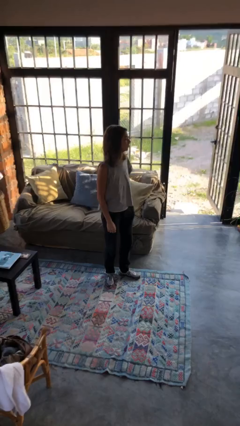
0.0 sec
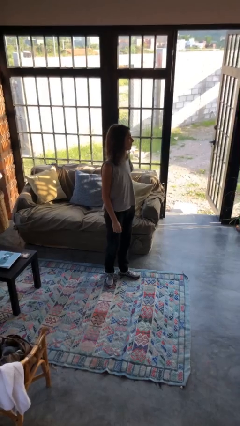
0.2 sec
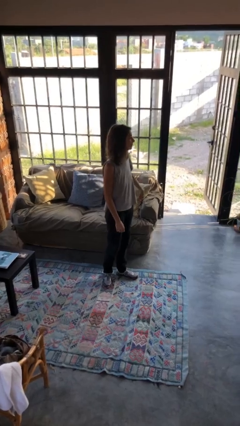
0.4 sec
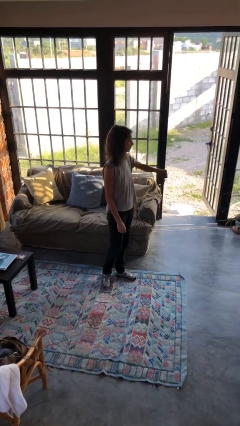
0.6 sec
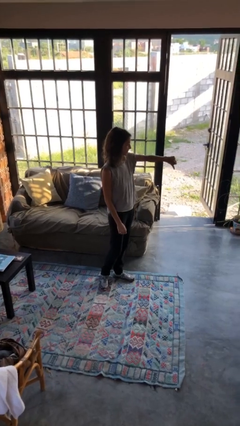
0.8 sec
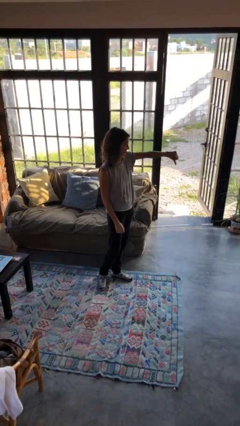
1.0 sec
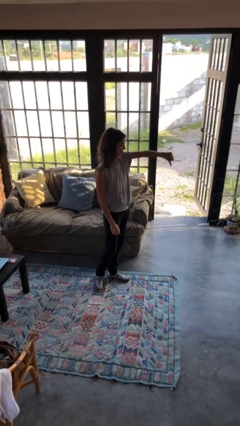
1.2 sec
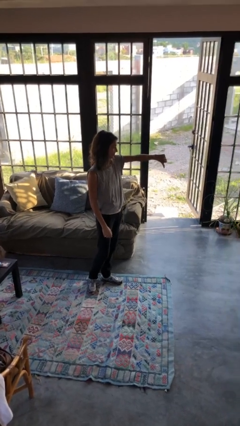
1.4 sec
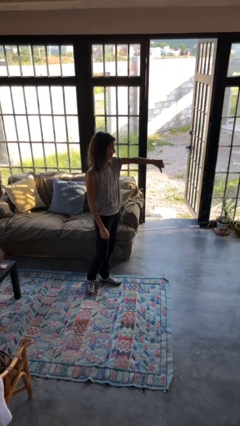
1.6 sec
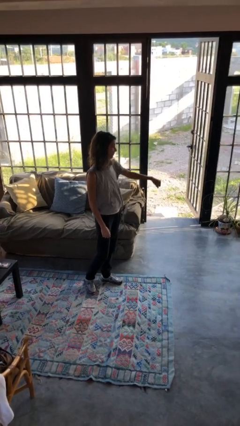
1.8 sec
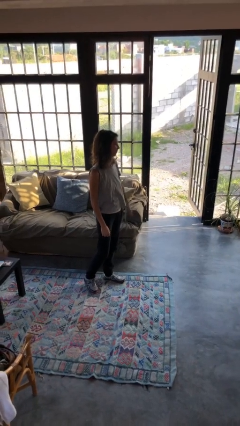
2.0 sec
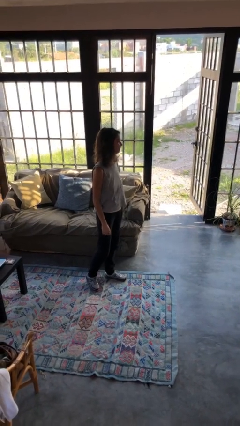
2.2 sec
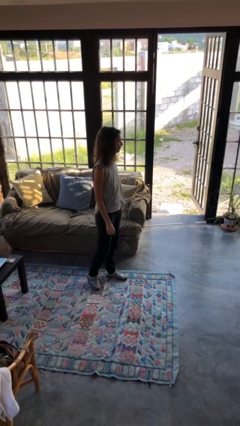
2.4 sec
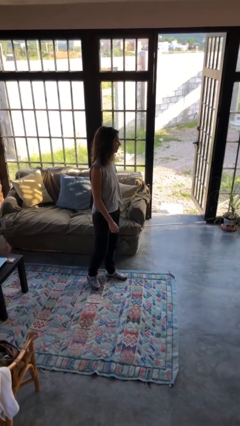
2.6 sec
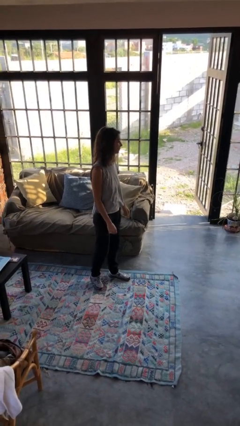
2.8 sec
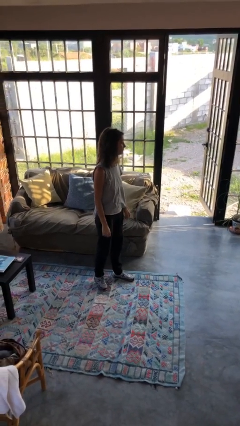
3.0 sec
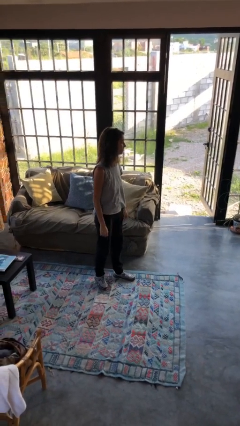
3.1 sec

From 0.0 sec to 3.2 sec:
person gestures thumbs down

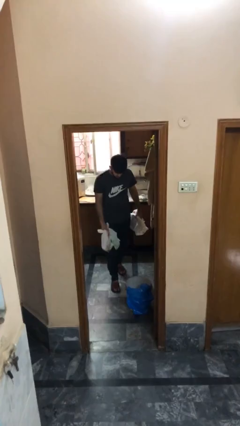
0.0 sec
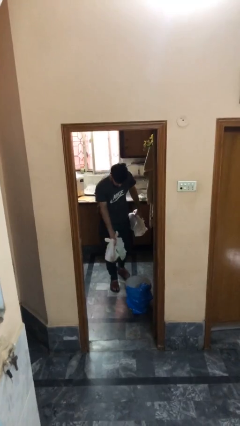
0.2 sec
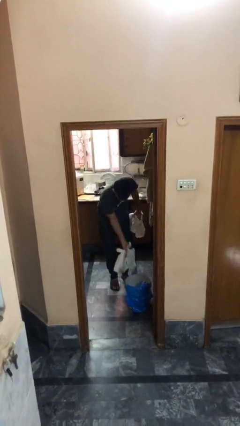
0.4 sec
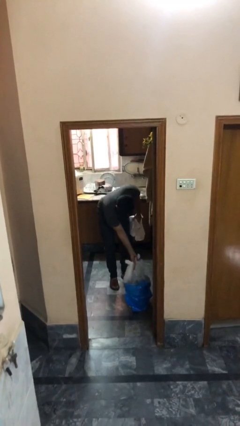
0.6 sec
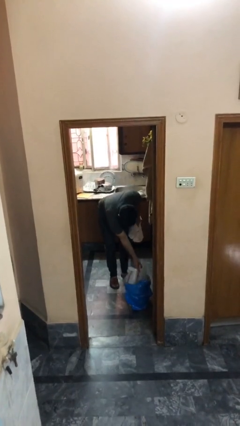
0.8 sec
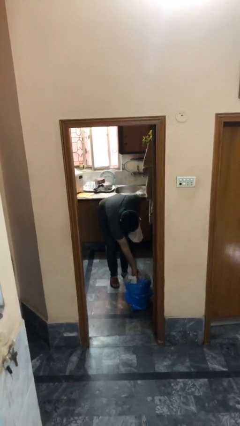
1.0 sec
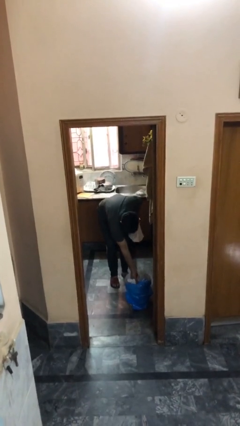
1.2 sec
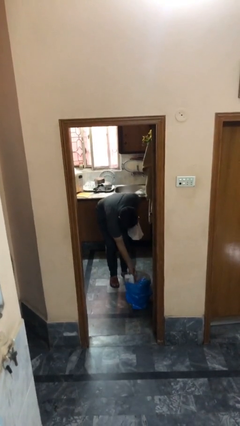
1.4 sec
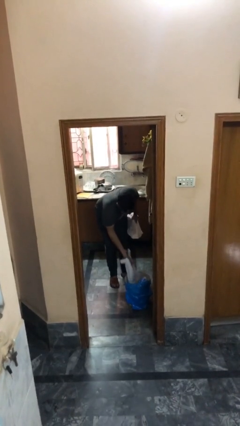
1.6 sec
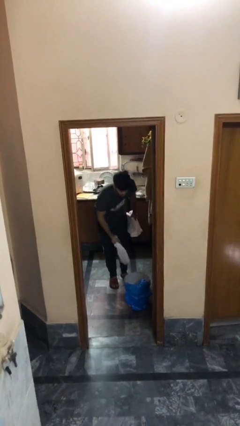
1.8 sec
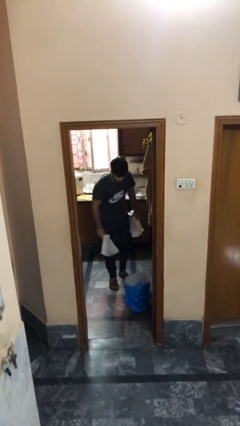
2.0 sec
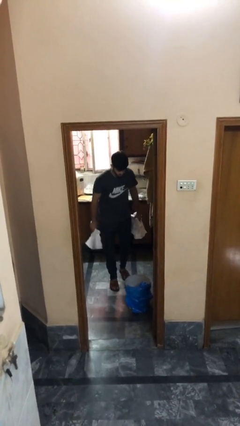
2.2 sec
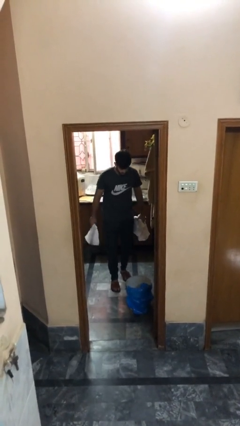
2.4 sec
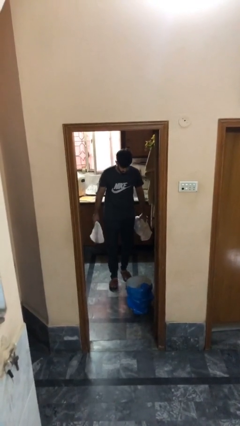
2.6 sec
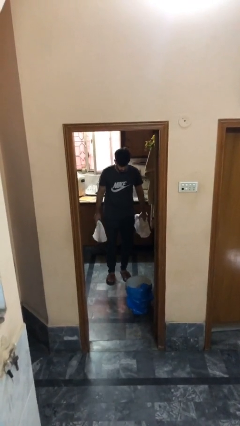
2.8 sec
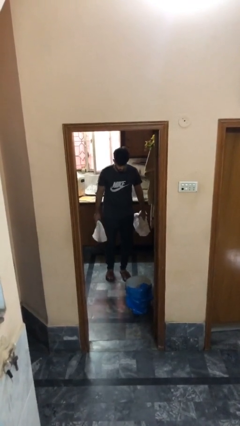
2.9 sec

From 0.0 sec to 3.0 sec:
person discards trash

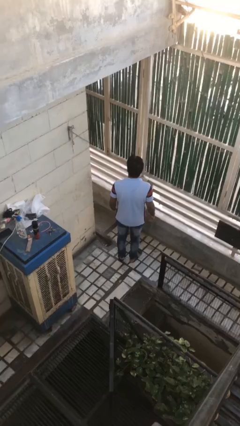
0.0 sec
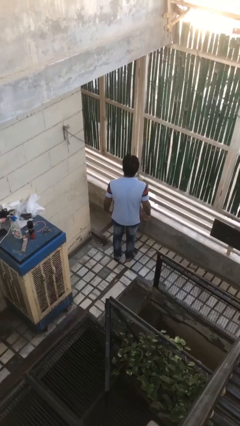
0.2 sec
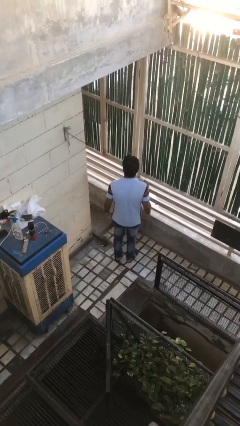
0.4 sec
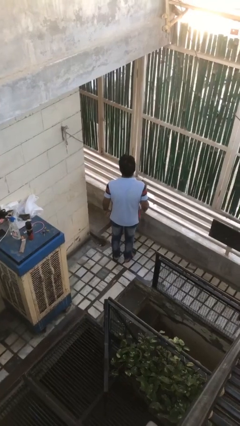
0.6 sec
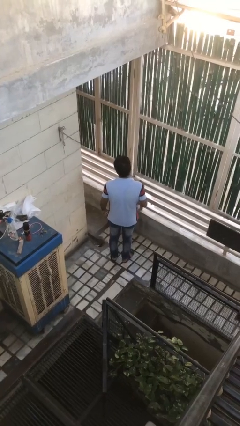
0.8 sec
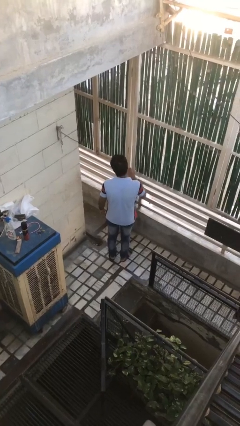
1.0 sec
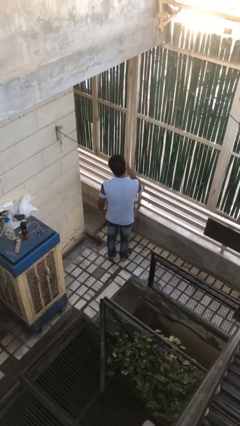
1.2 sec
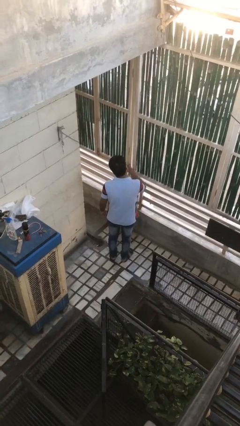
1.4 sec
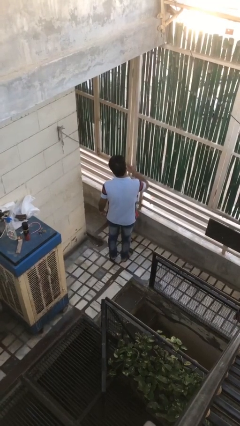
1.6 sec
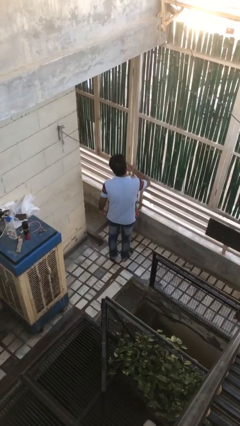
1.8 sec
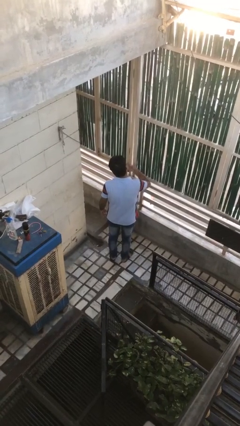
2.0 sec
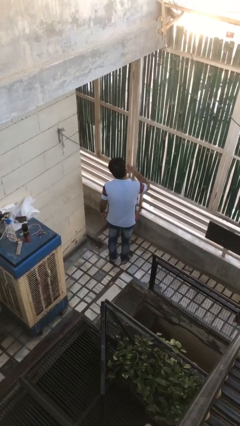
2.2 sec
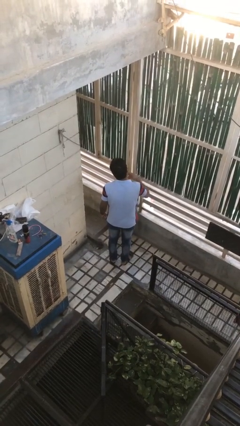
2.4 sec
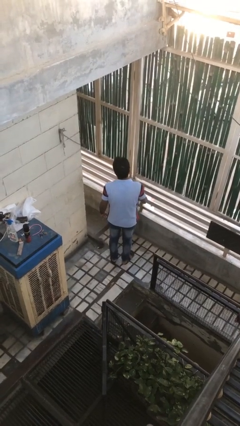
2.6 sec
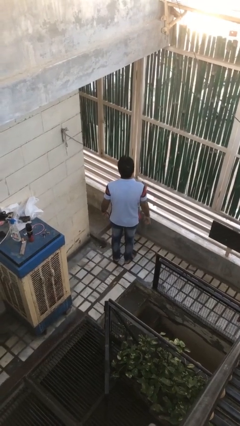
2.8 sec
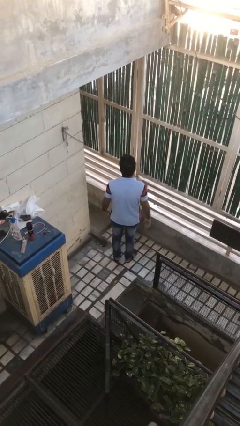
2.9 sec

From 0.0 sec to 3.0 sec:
person licks fingers

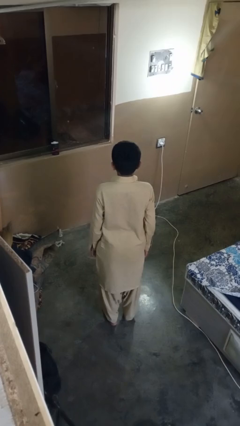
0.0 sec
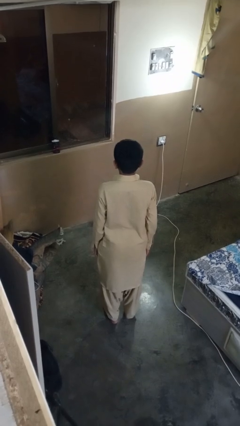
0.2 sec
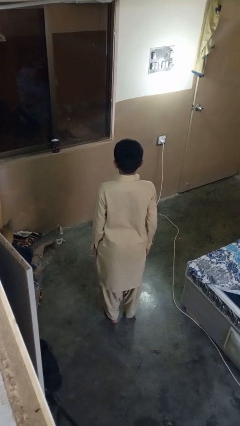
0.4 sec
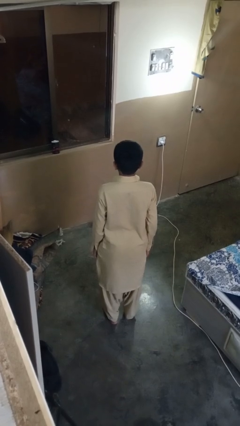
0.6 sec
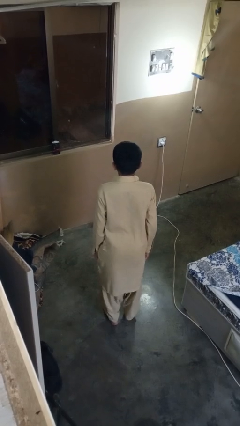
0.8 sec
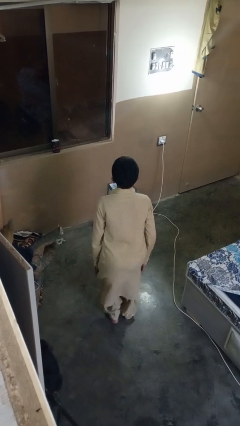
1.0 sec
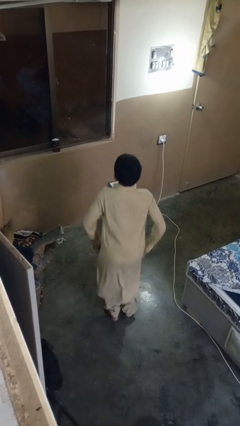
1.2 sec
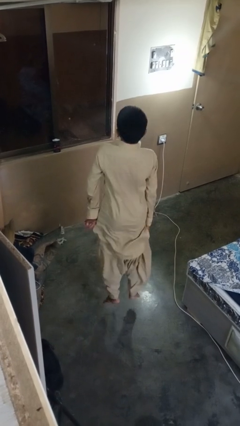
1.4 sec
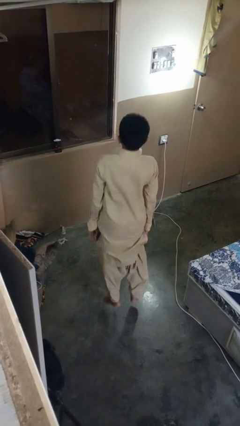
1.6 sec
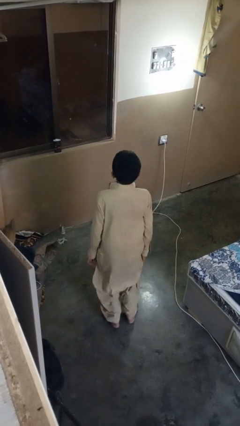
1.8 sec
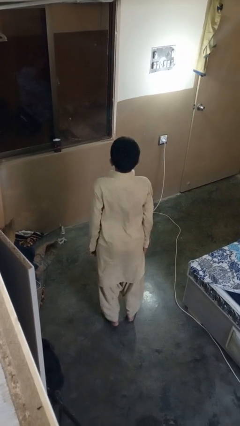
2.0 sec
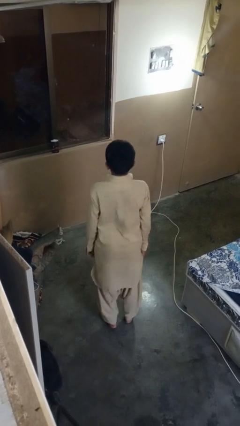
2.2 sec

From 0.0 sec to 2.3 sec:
person jumps

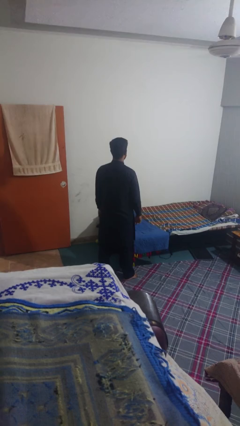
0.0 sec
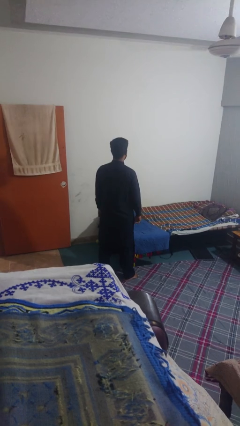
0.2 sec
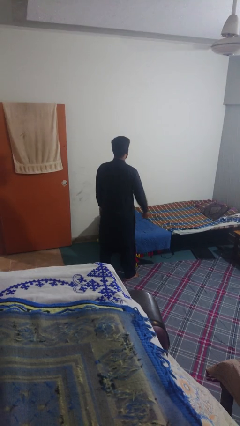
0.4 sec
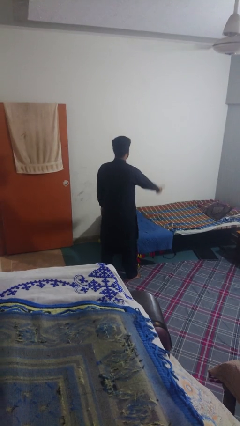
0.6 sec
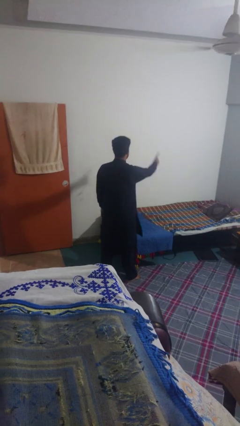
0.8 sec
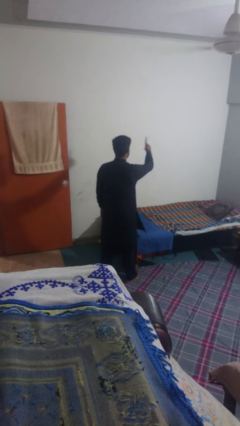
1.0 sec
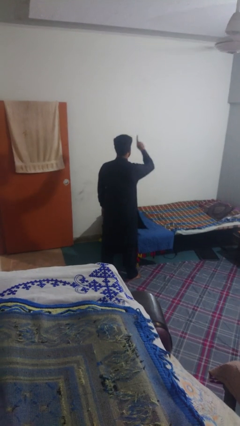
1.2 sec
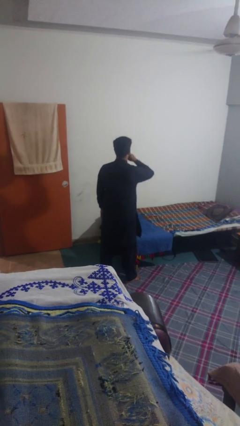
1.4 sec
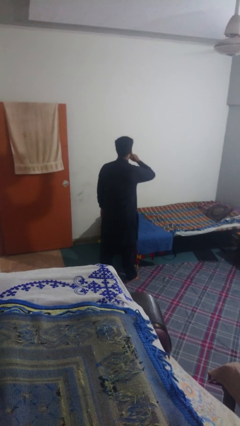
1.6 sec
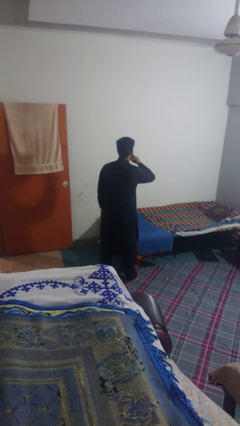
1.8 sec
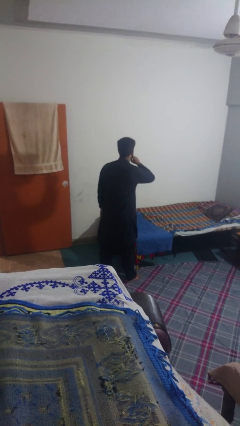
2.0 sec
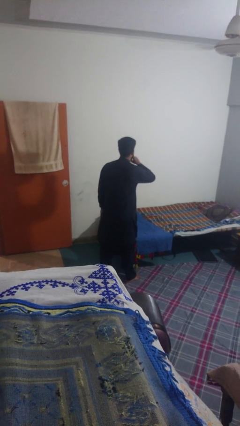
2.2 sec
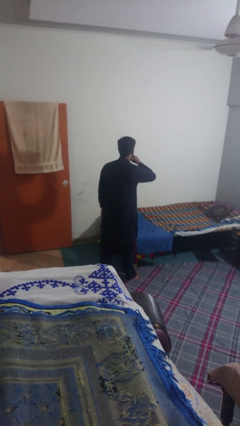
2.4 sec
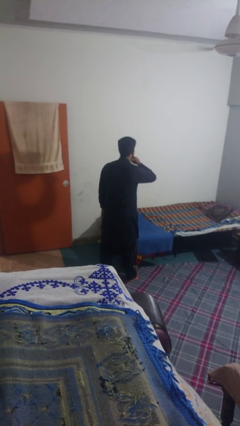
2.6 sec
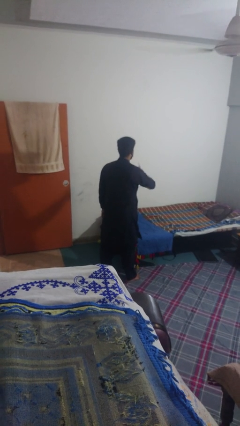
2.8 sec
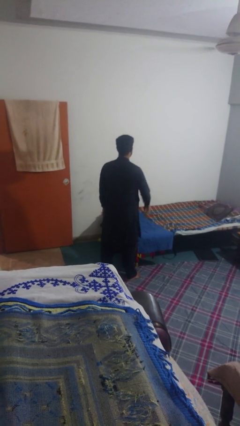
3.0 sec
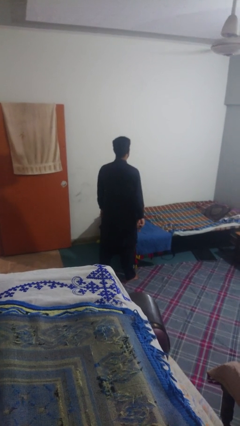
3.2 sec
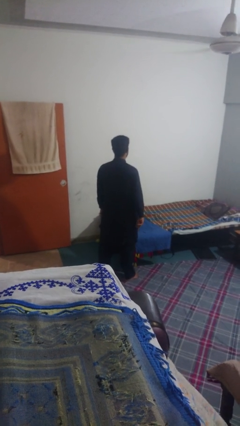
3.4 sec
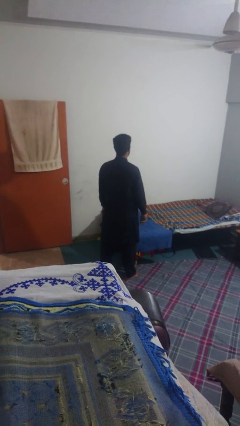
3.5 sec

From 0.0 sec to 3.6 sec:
person gestures be quiet

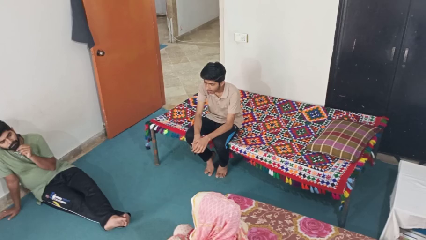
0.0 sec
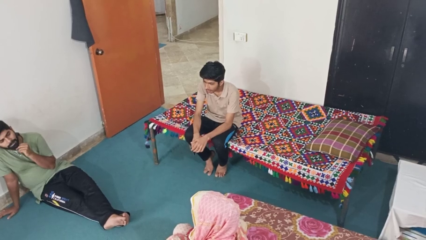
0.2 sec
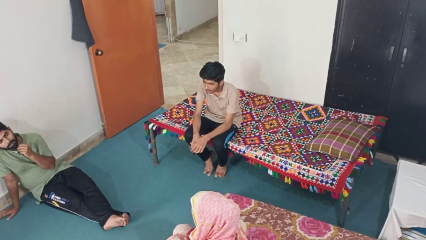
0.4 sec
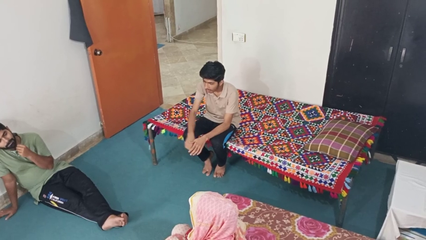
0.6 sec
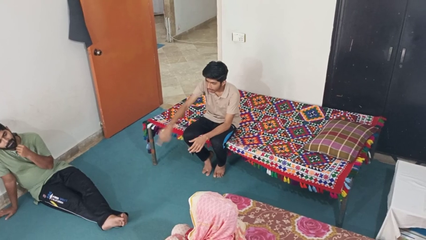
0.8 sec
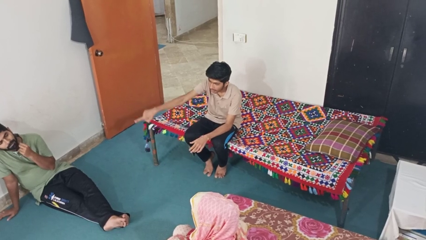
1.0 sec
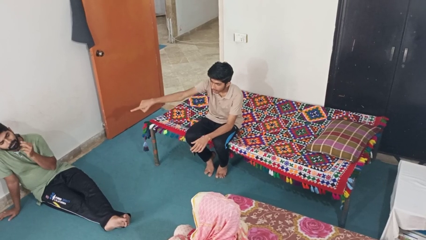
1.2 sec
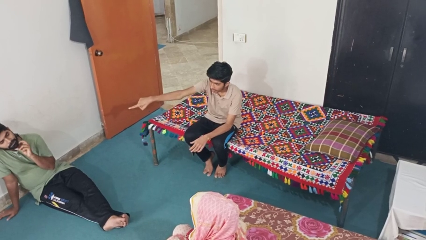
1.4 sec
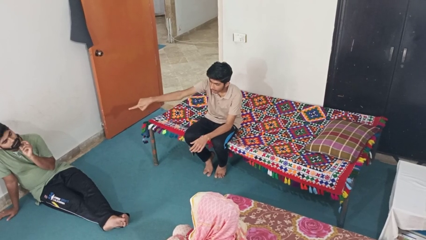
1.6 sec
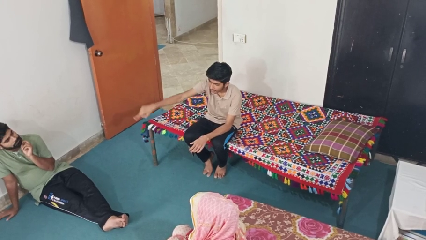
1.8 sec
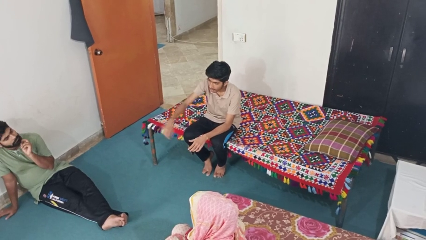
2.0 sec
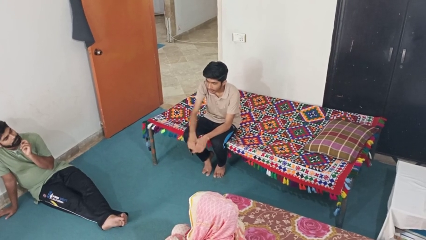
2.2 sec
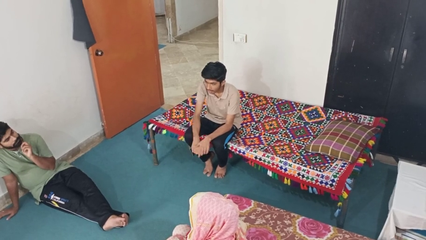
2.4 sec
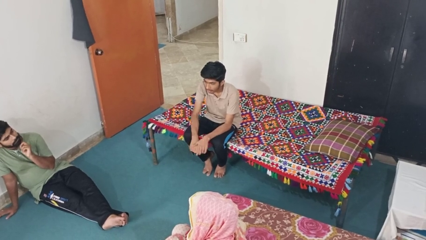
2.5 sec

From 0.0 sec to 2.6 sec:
person points at person
